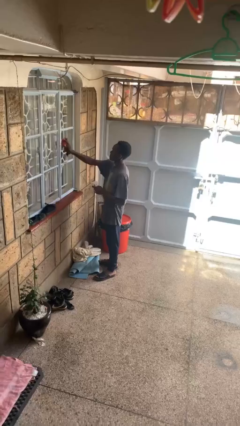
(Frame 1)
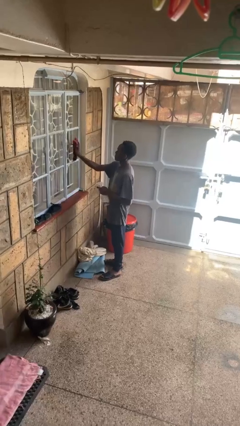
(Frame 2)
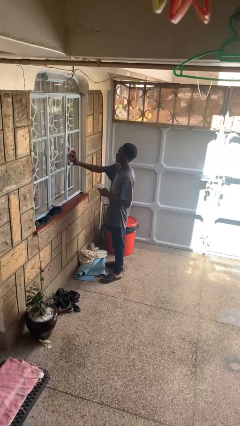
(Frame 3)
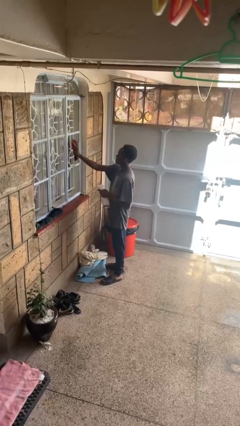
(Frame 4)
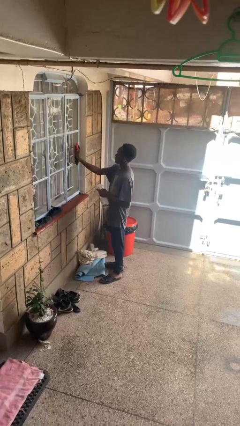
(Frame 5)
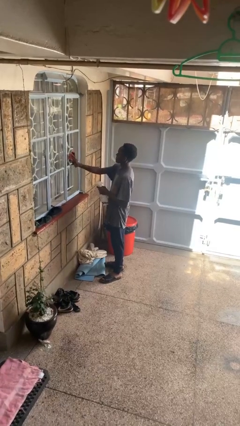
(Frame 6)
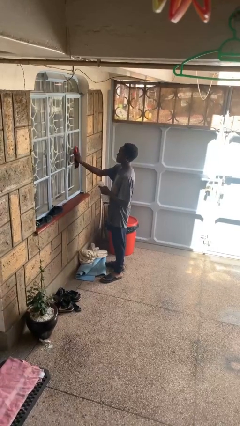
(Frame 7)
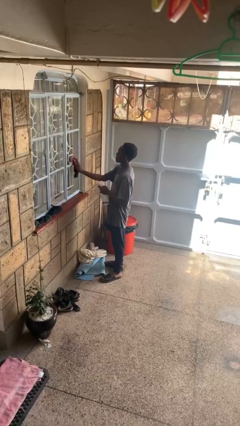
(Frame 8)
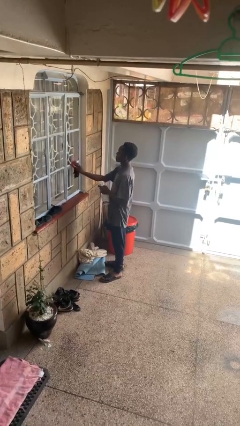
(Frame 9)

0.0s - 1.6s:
person washes window

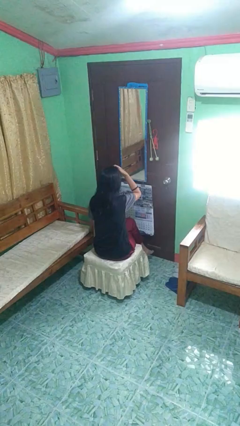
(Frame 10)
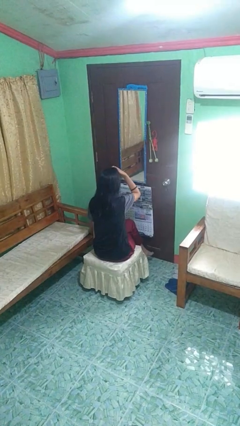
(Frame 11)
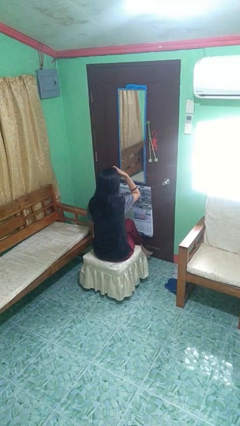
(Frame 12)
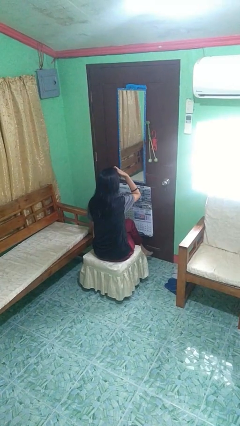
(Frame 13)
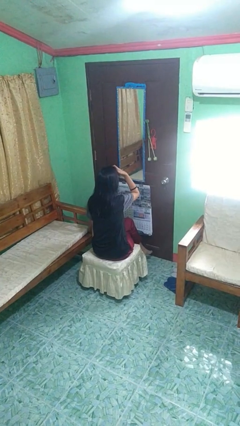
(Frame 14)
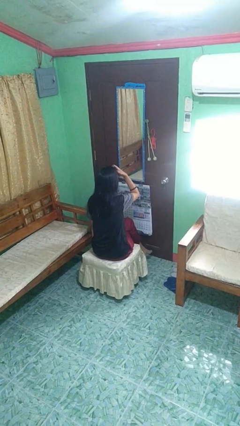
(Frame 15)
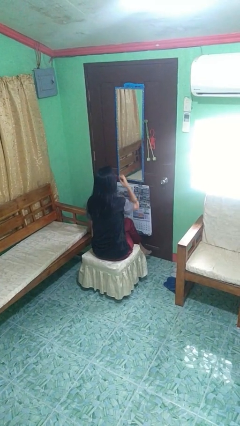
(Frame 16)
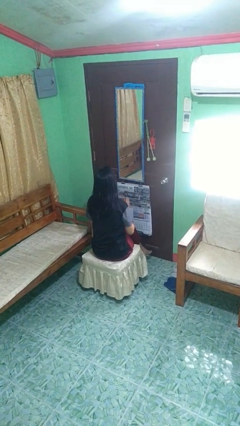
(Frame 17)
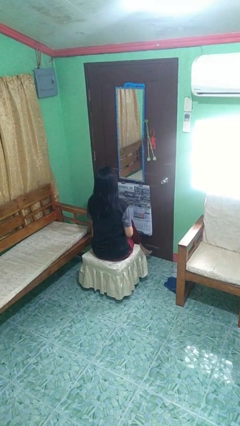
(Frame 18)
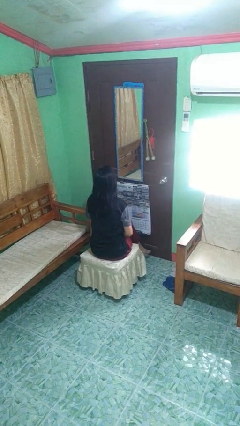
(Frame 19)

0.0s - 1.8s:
person scratches face

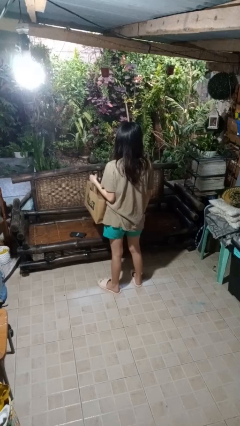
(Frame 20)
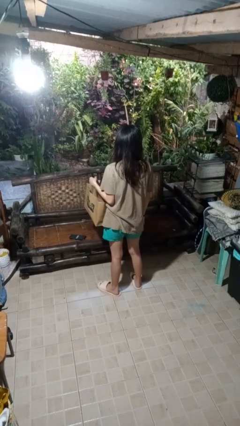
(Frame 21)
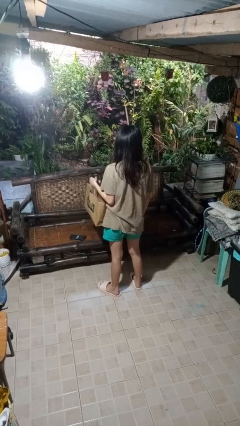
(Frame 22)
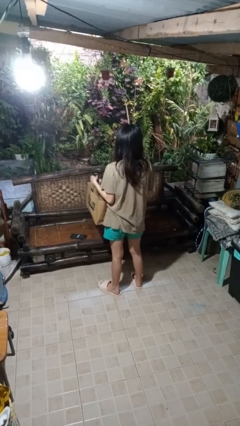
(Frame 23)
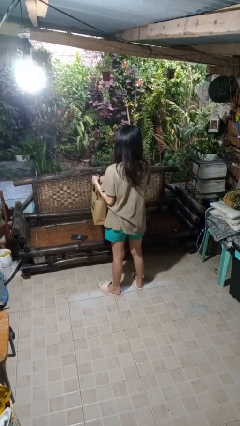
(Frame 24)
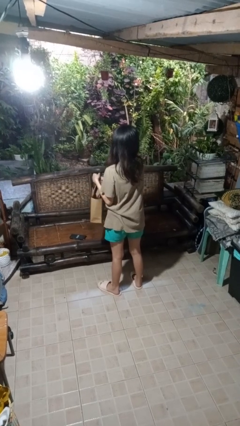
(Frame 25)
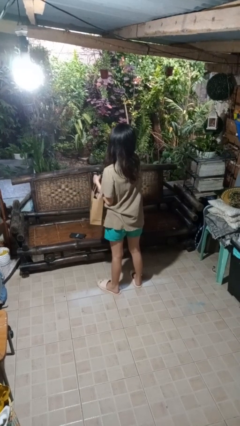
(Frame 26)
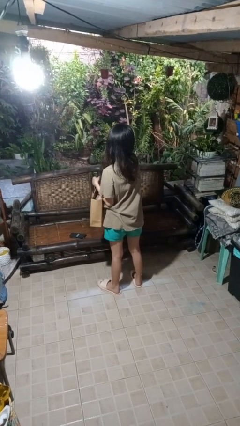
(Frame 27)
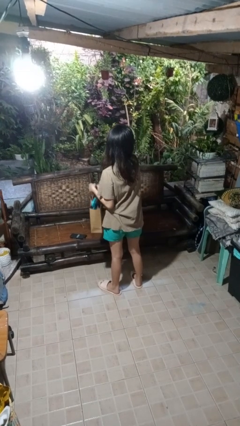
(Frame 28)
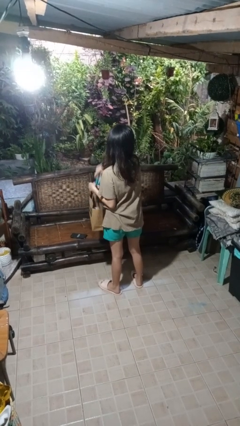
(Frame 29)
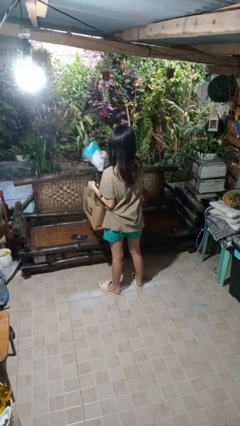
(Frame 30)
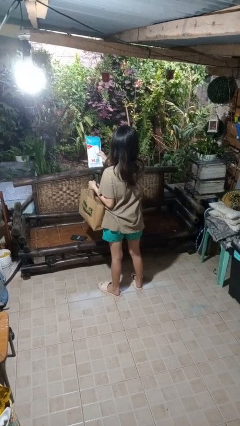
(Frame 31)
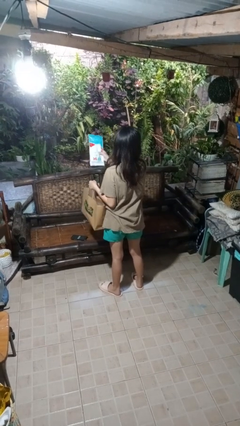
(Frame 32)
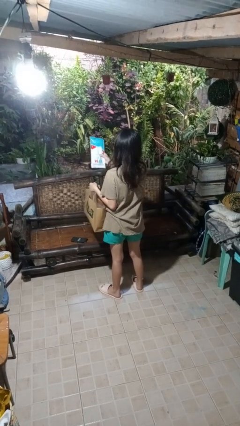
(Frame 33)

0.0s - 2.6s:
person takes object from bag

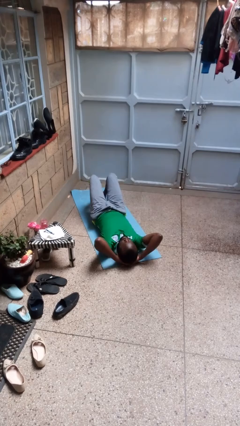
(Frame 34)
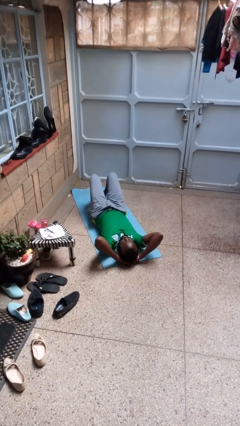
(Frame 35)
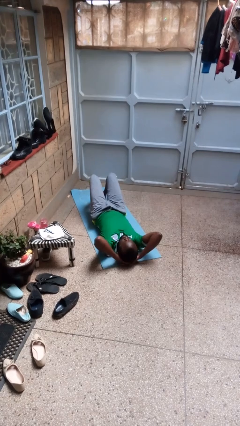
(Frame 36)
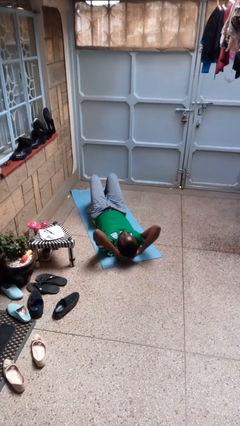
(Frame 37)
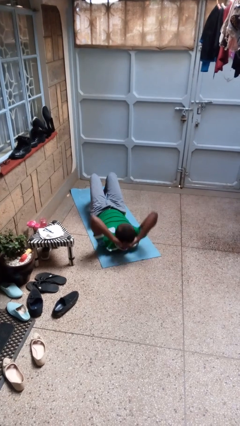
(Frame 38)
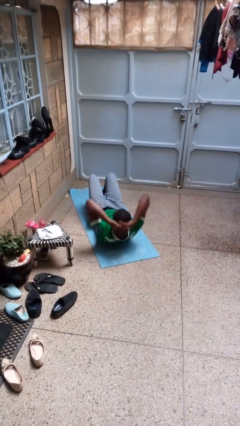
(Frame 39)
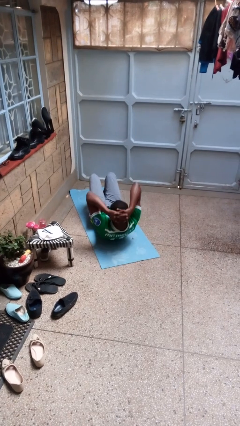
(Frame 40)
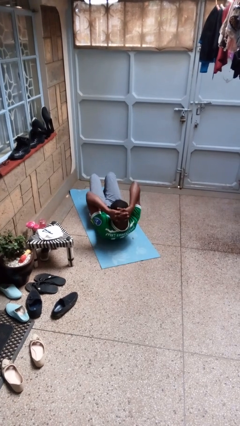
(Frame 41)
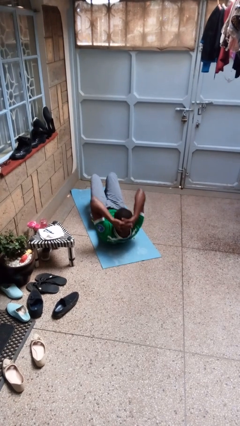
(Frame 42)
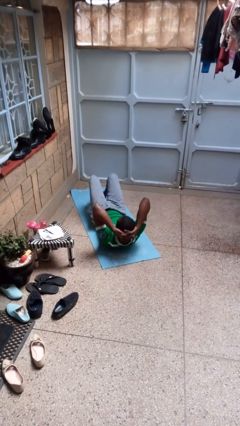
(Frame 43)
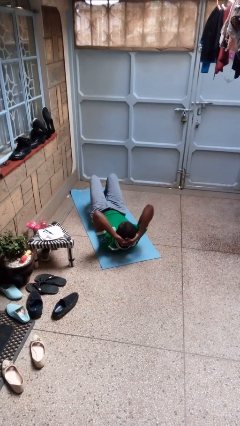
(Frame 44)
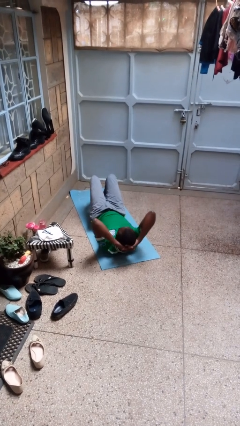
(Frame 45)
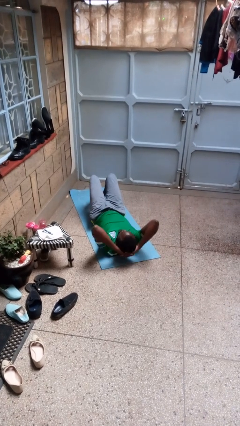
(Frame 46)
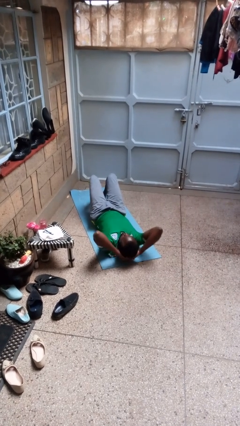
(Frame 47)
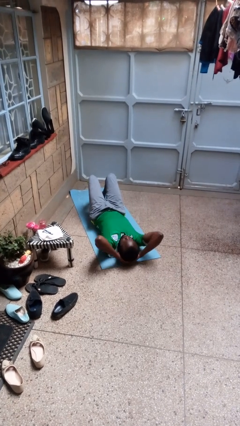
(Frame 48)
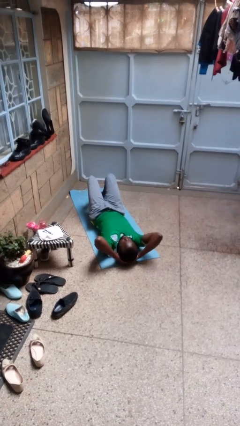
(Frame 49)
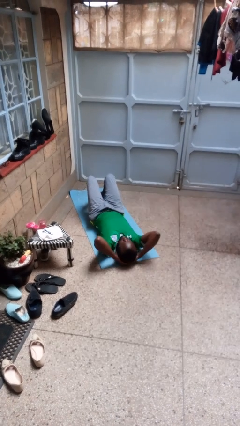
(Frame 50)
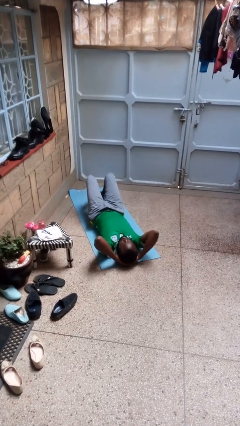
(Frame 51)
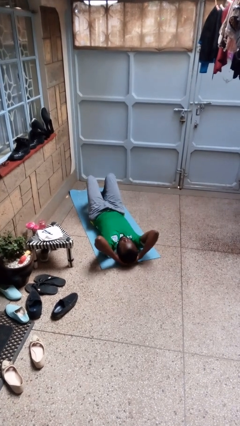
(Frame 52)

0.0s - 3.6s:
person exercises with situp

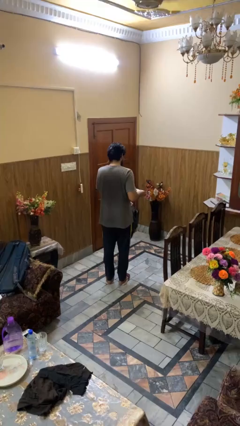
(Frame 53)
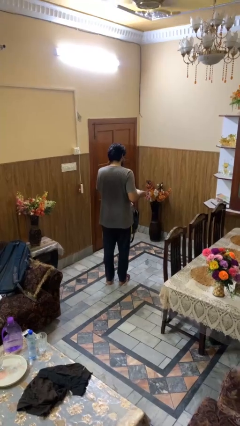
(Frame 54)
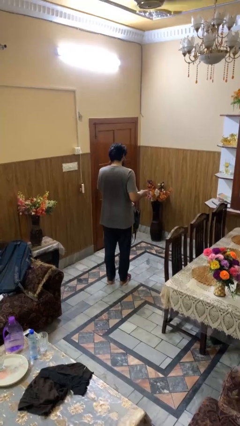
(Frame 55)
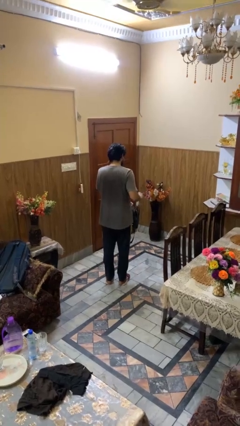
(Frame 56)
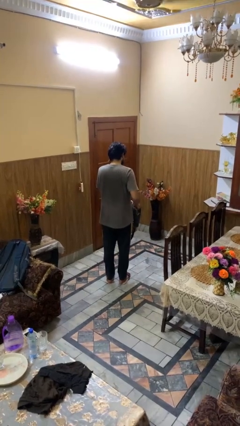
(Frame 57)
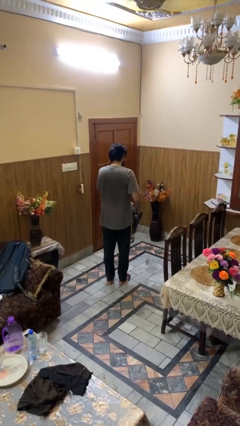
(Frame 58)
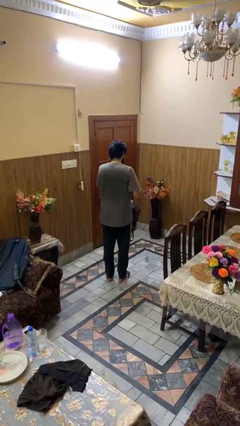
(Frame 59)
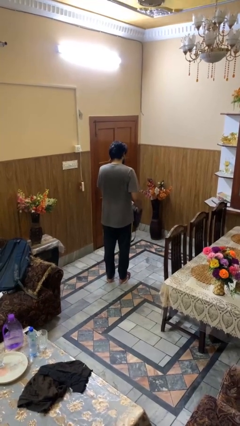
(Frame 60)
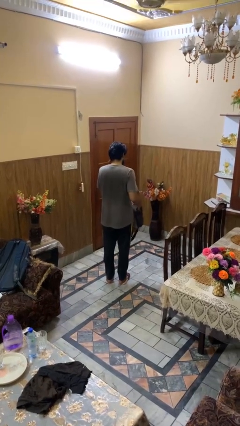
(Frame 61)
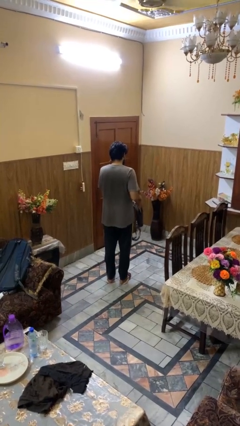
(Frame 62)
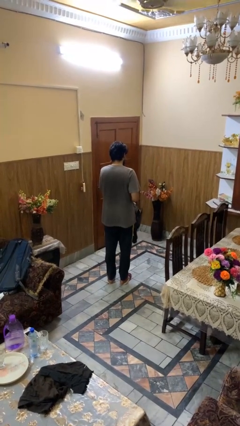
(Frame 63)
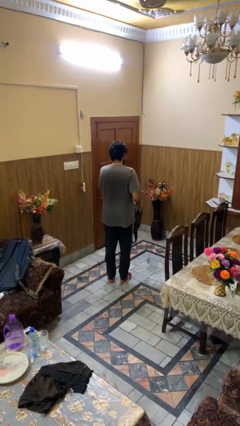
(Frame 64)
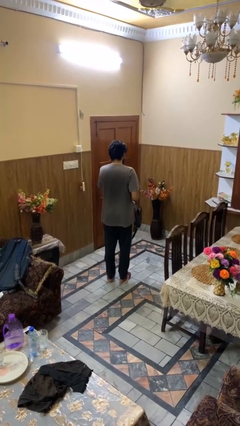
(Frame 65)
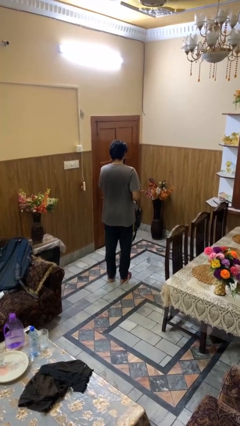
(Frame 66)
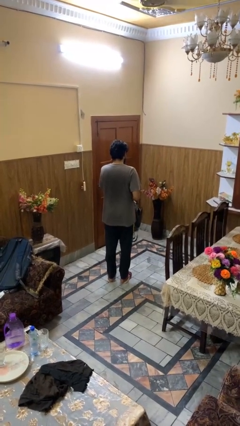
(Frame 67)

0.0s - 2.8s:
person puts object into purse

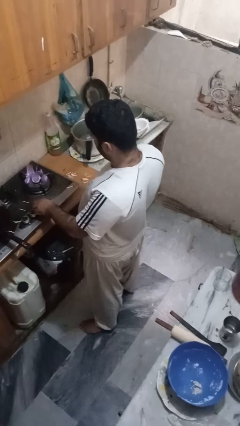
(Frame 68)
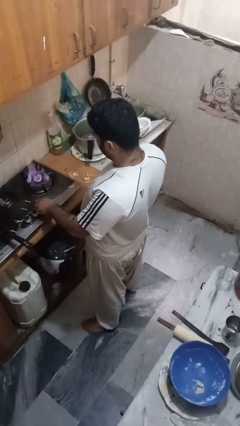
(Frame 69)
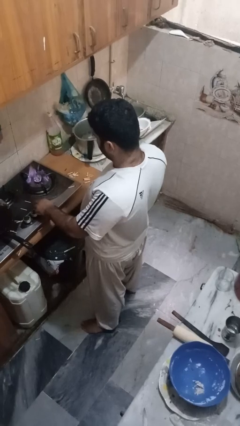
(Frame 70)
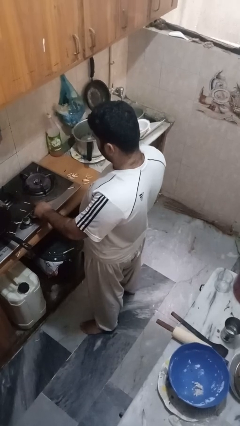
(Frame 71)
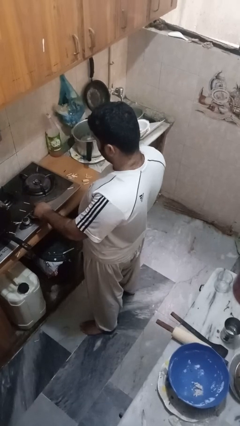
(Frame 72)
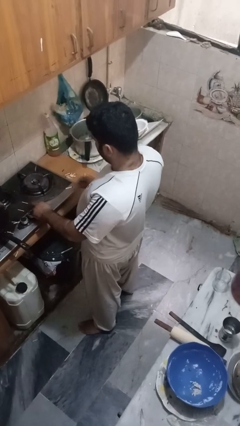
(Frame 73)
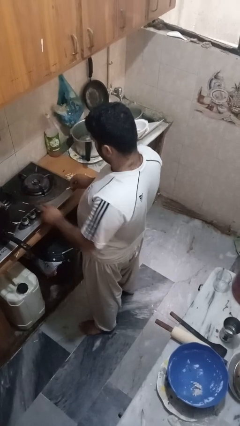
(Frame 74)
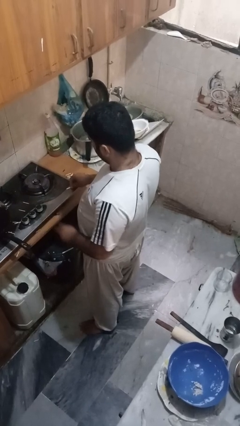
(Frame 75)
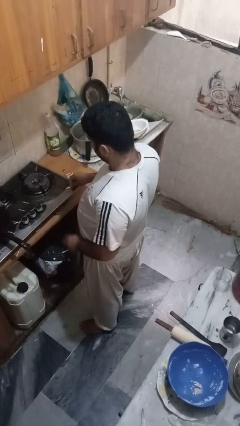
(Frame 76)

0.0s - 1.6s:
person turns off stovetop

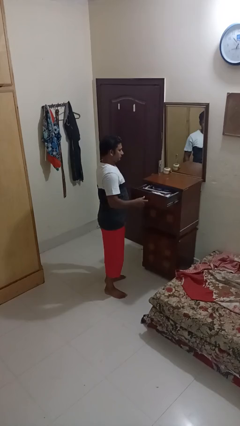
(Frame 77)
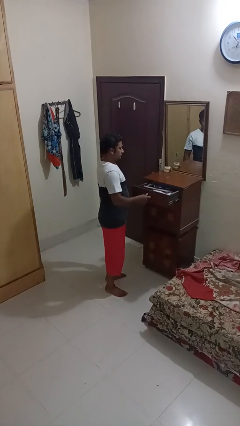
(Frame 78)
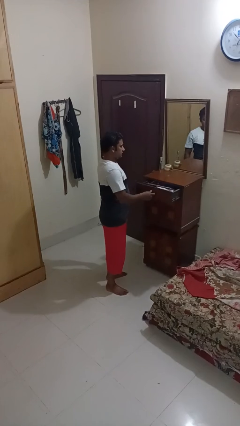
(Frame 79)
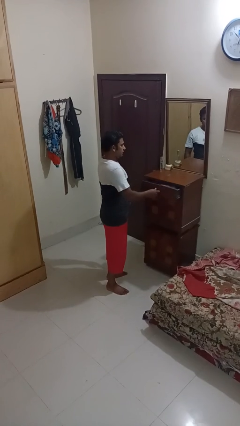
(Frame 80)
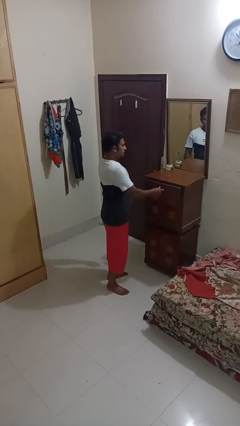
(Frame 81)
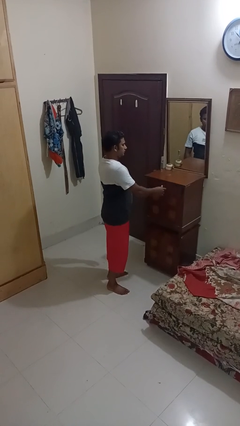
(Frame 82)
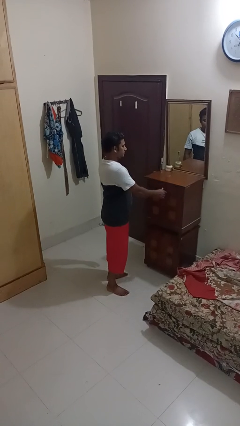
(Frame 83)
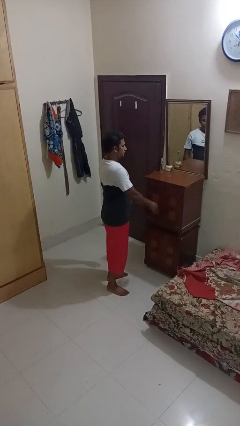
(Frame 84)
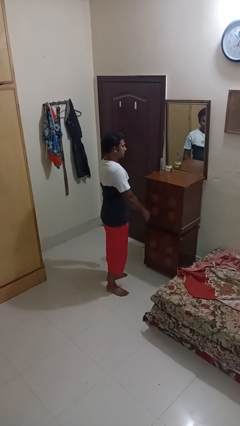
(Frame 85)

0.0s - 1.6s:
person closes dresser drawer

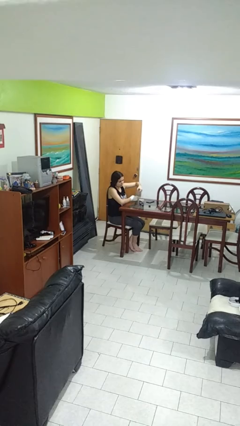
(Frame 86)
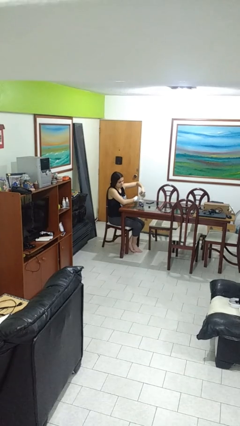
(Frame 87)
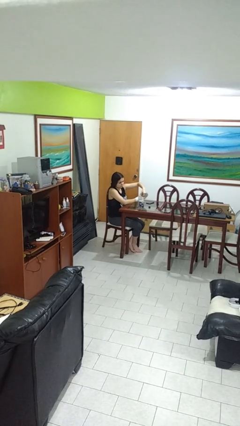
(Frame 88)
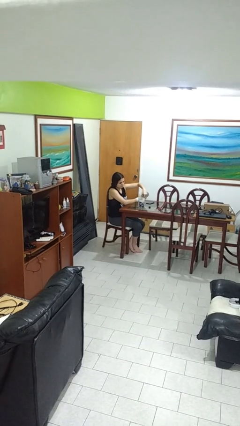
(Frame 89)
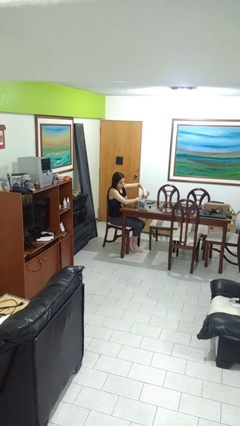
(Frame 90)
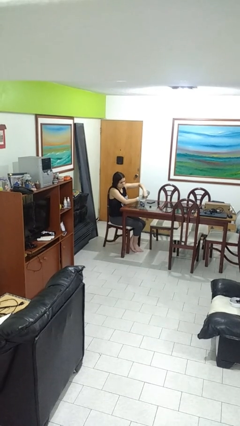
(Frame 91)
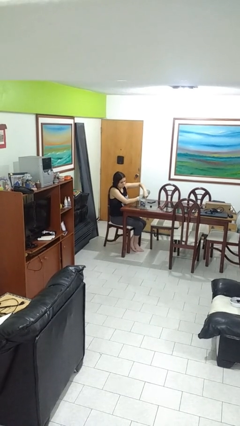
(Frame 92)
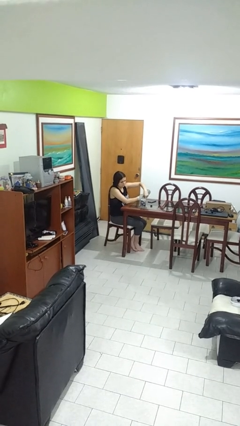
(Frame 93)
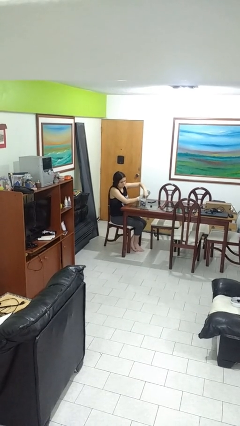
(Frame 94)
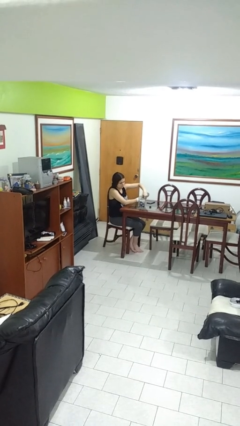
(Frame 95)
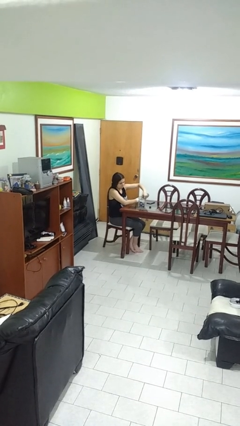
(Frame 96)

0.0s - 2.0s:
person pours liquid into cup
